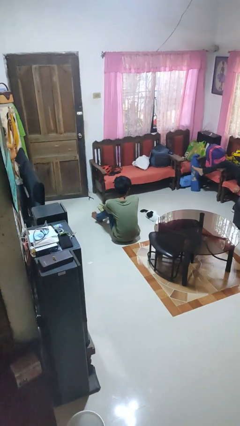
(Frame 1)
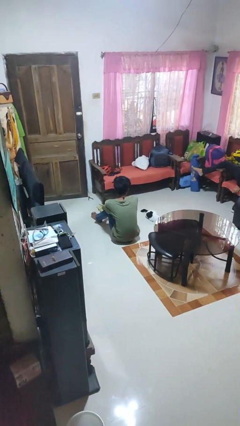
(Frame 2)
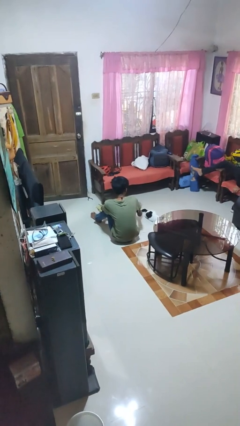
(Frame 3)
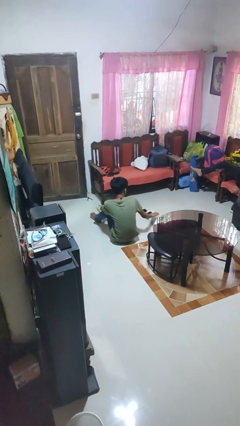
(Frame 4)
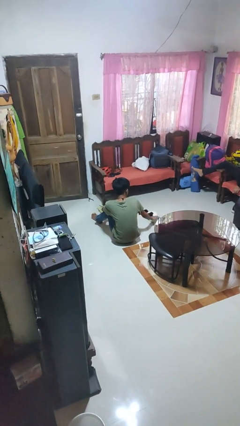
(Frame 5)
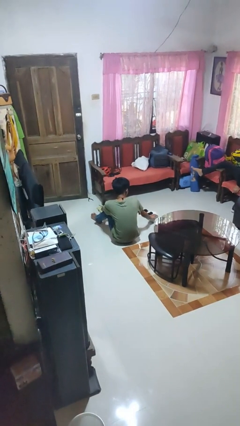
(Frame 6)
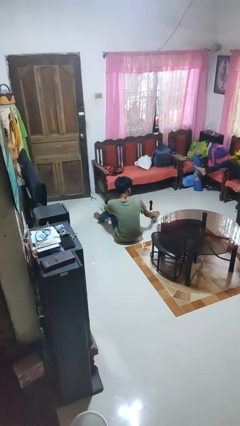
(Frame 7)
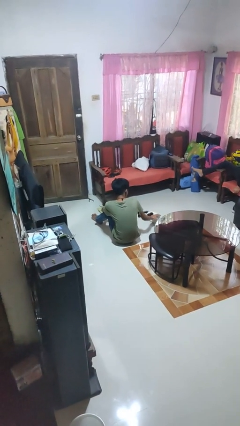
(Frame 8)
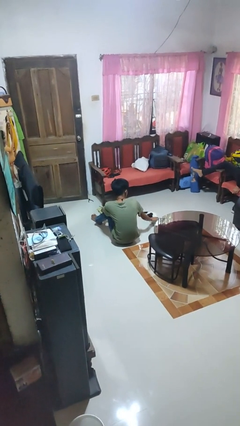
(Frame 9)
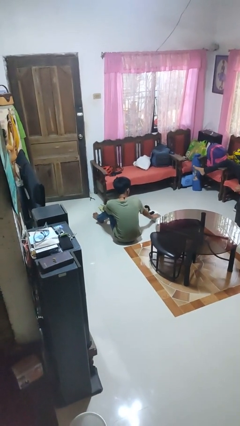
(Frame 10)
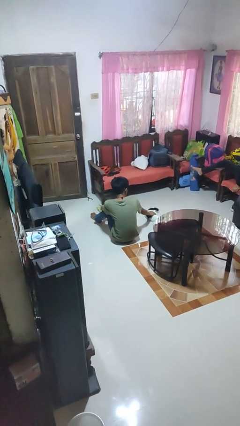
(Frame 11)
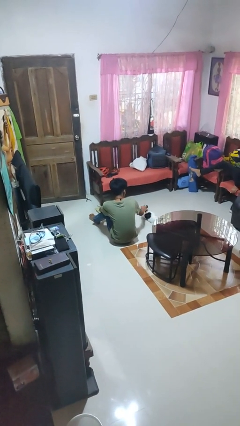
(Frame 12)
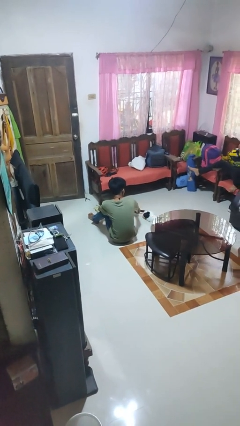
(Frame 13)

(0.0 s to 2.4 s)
person pets cat

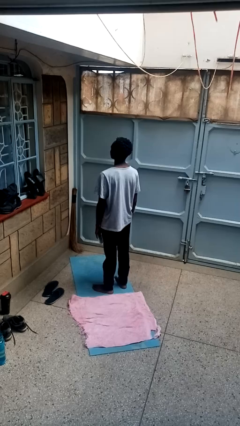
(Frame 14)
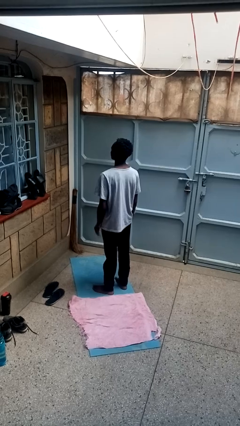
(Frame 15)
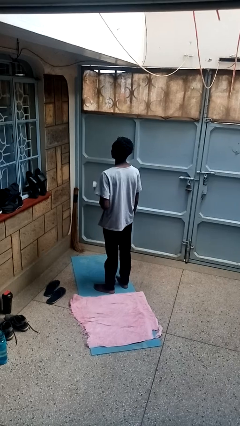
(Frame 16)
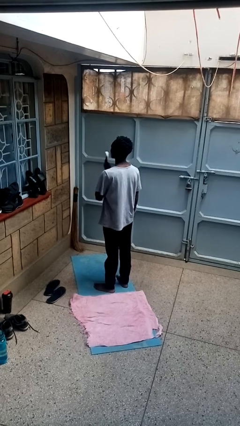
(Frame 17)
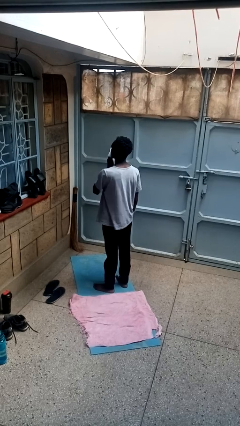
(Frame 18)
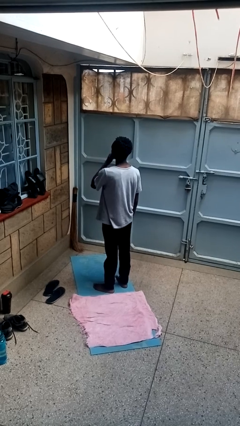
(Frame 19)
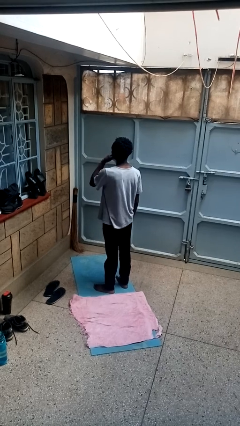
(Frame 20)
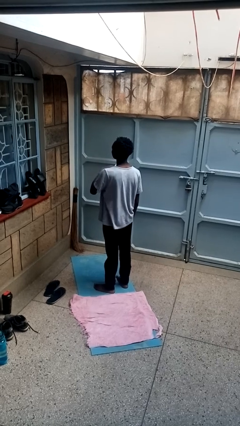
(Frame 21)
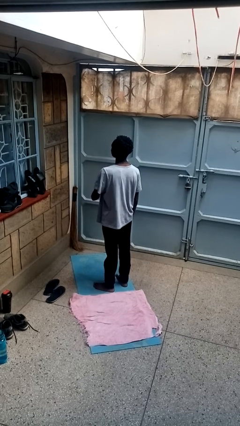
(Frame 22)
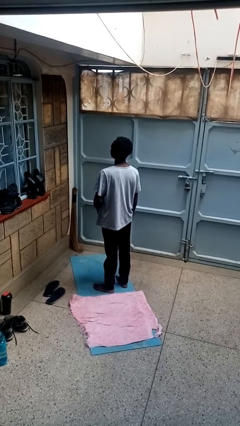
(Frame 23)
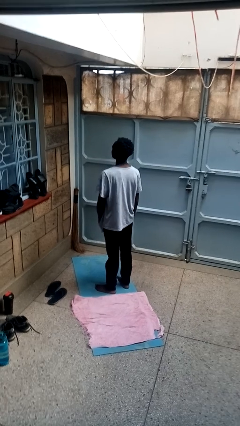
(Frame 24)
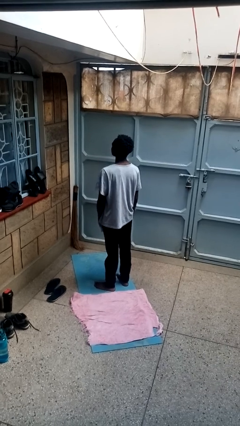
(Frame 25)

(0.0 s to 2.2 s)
person wipes mouth with napkin

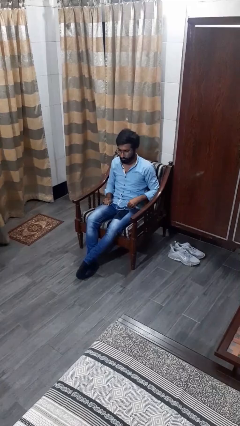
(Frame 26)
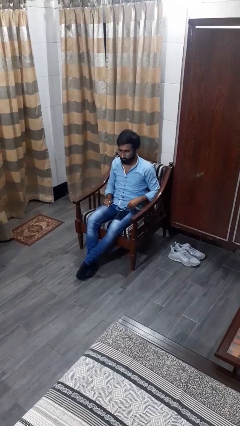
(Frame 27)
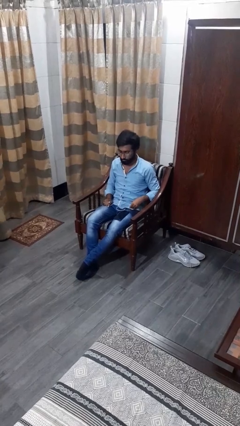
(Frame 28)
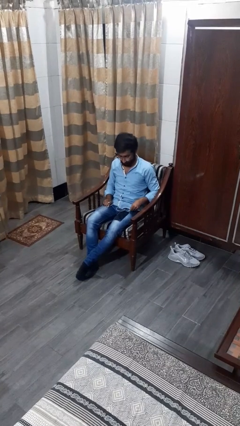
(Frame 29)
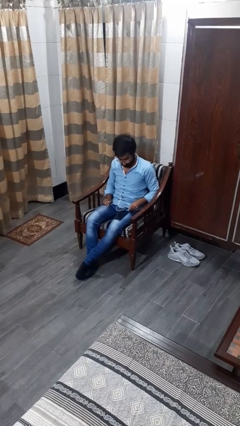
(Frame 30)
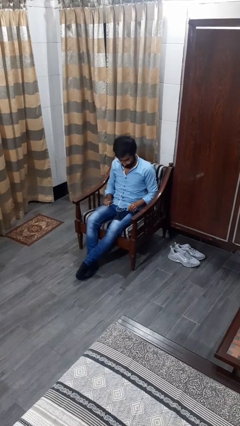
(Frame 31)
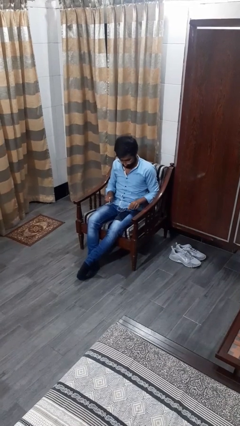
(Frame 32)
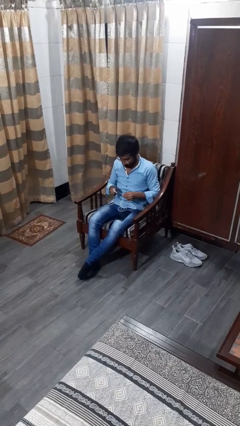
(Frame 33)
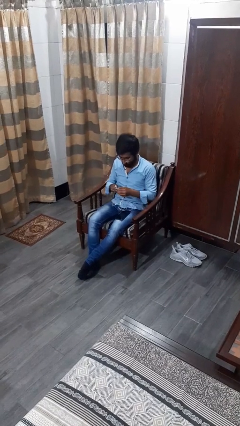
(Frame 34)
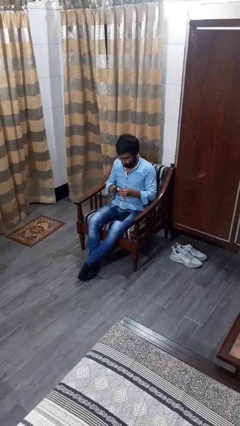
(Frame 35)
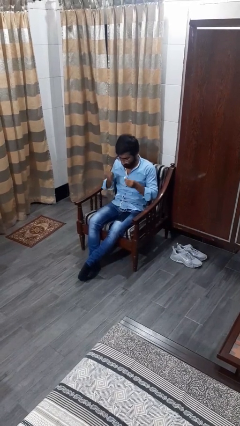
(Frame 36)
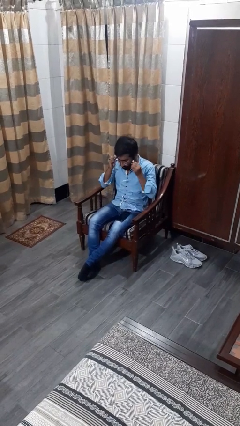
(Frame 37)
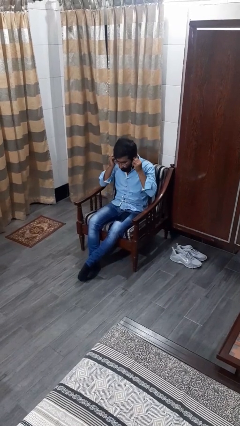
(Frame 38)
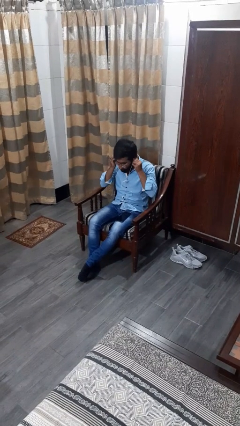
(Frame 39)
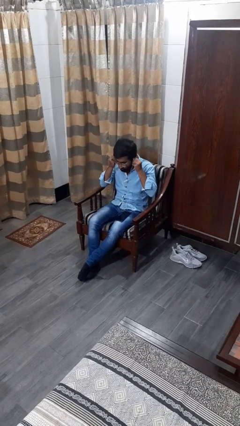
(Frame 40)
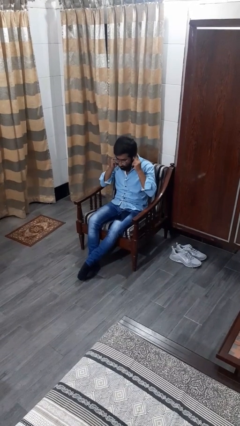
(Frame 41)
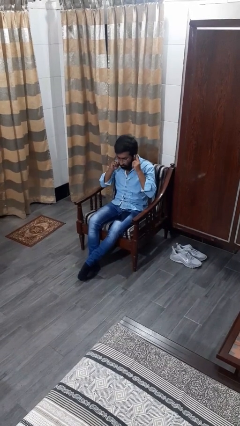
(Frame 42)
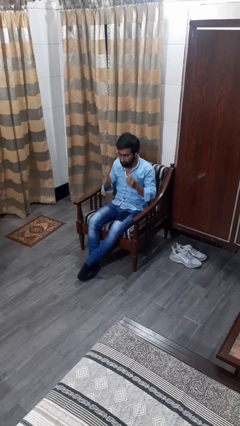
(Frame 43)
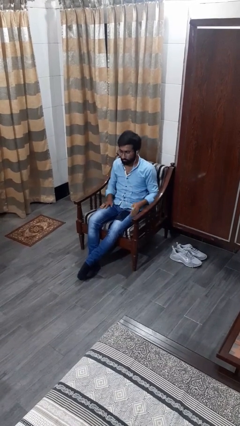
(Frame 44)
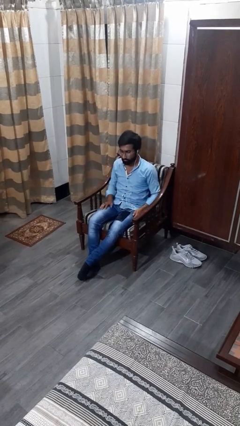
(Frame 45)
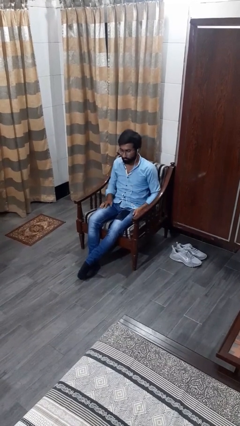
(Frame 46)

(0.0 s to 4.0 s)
person puts on headphones

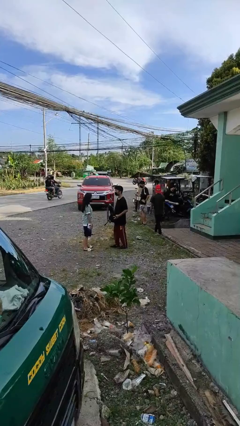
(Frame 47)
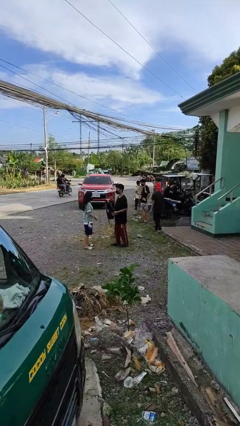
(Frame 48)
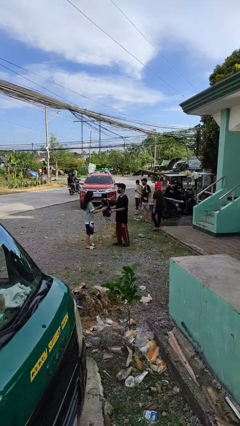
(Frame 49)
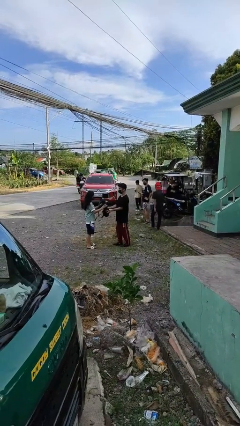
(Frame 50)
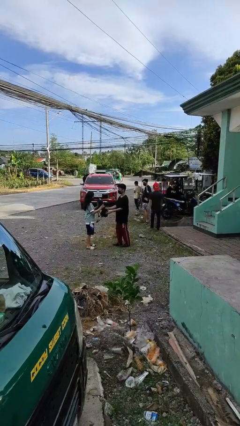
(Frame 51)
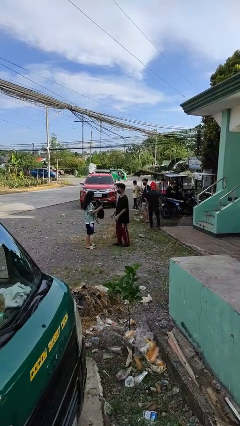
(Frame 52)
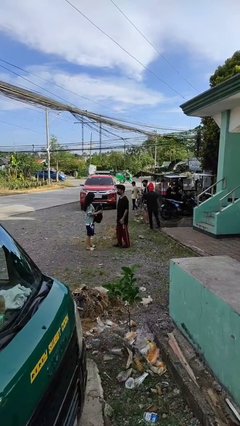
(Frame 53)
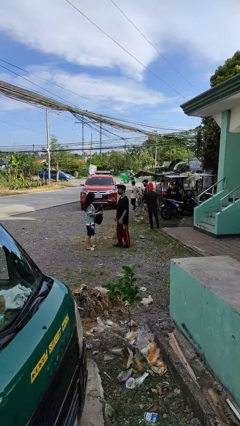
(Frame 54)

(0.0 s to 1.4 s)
person transfers object to person

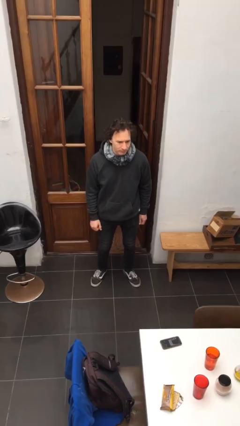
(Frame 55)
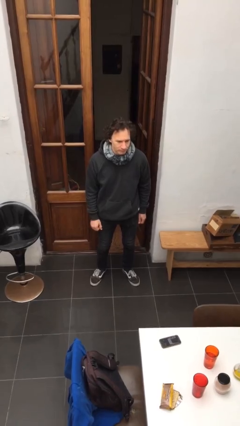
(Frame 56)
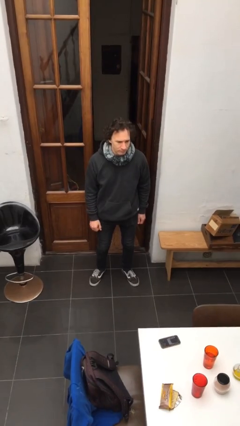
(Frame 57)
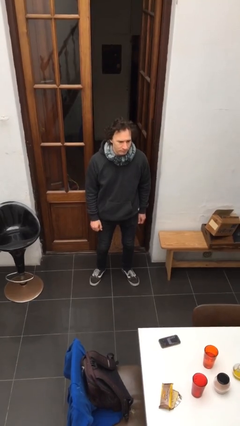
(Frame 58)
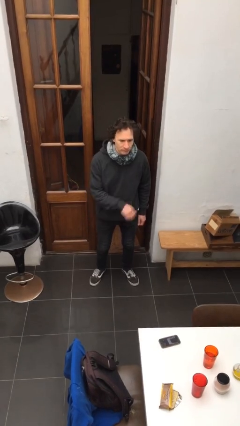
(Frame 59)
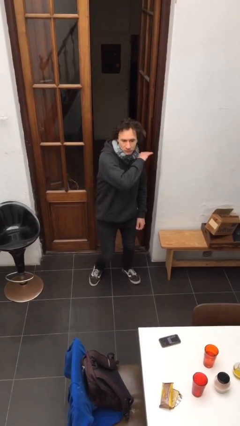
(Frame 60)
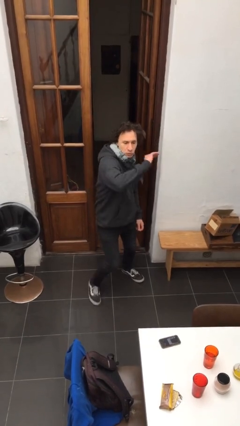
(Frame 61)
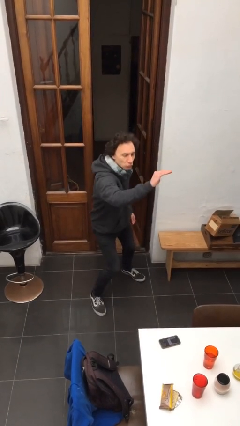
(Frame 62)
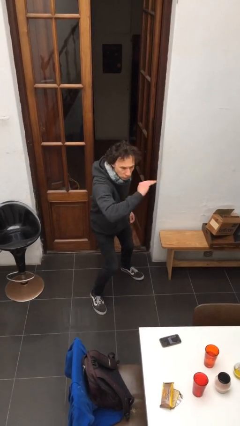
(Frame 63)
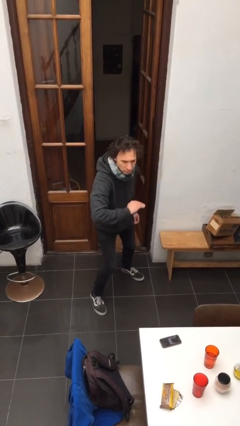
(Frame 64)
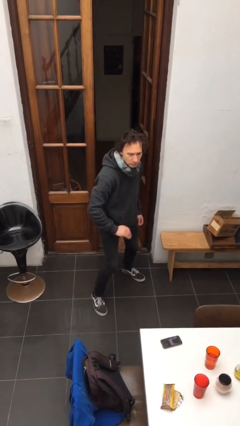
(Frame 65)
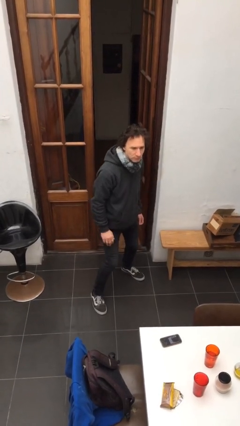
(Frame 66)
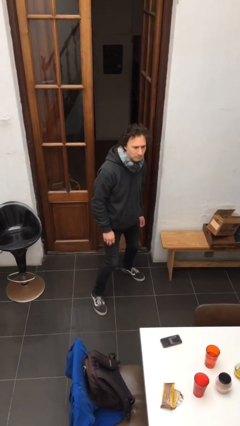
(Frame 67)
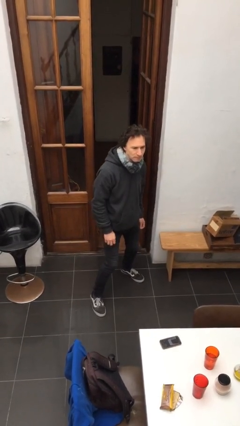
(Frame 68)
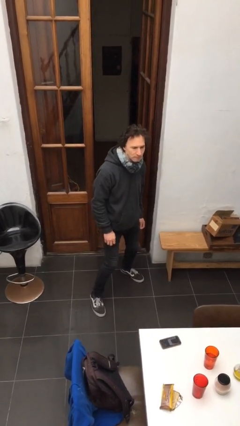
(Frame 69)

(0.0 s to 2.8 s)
person karate chop

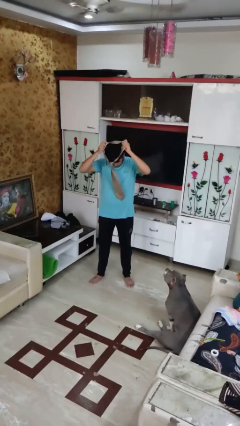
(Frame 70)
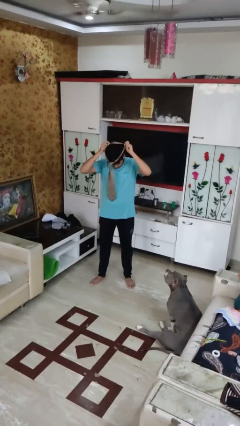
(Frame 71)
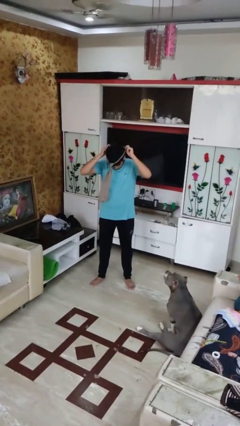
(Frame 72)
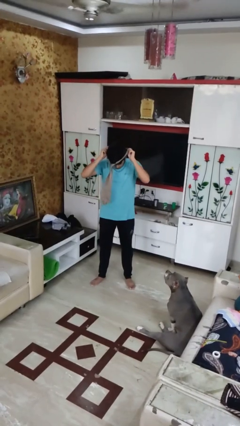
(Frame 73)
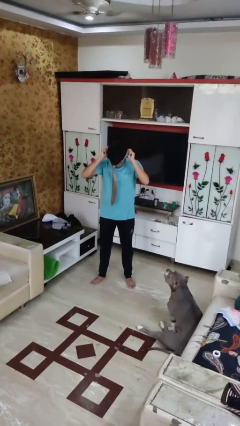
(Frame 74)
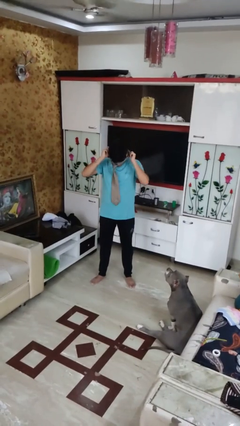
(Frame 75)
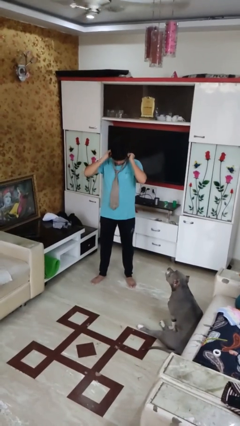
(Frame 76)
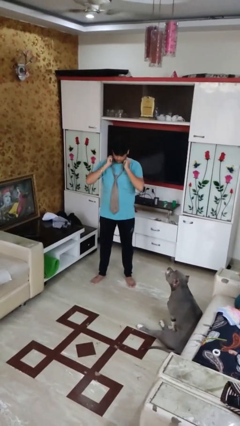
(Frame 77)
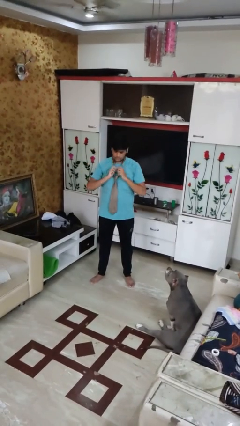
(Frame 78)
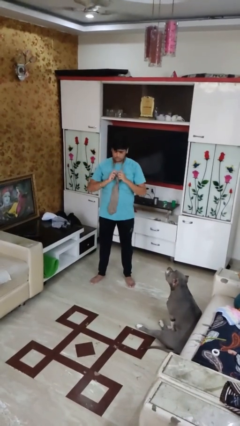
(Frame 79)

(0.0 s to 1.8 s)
person puts on necktie

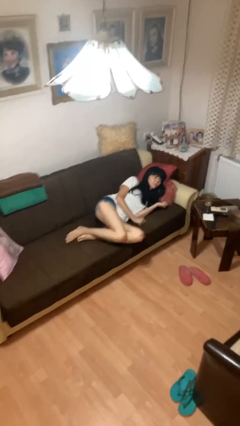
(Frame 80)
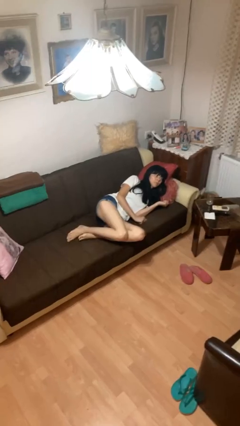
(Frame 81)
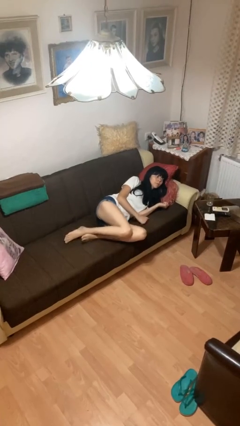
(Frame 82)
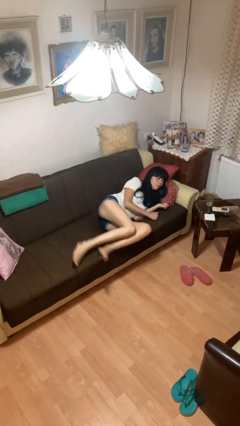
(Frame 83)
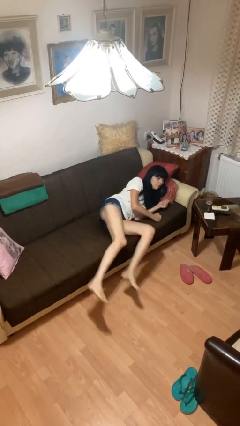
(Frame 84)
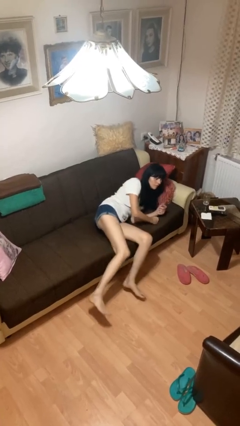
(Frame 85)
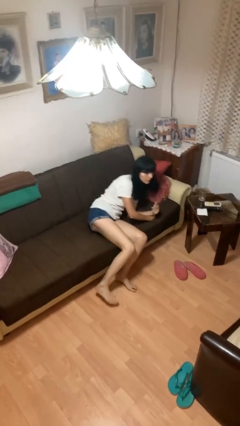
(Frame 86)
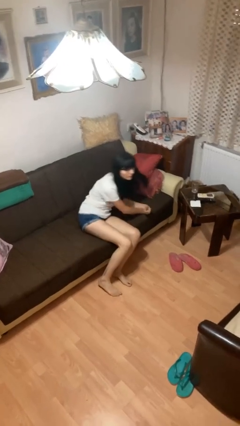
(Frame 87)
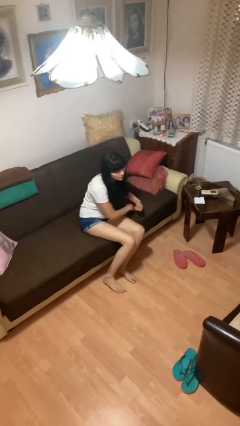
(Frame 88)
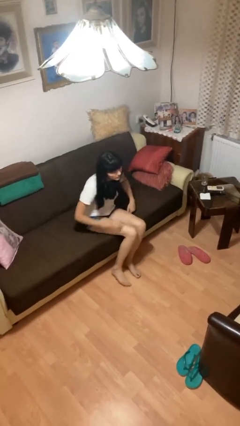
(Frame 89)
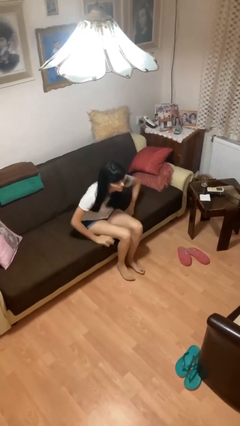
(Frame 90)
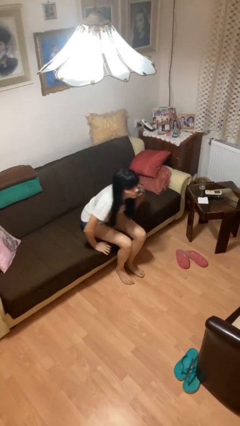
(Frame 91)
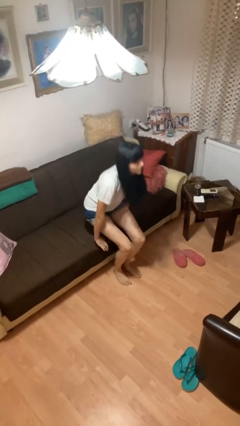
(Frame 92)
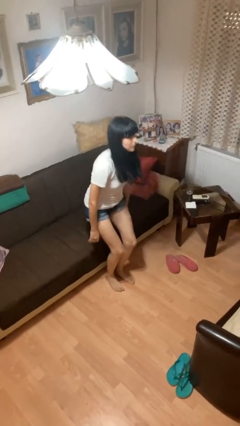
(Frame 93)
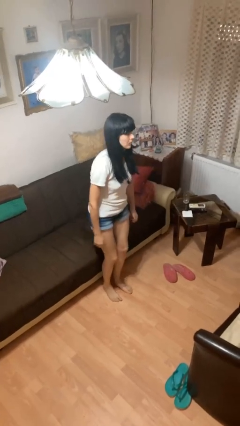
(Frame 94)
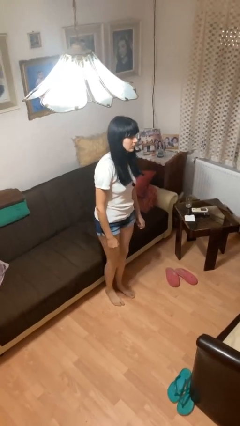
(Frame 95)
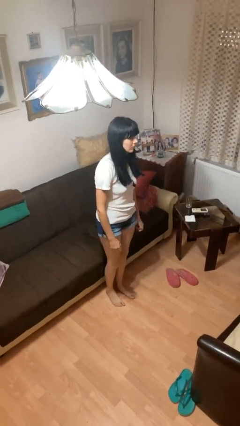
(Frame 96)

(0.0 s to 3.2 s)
person stands up
